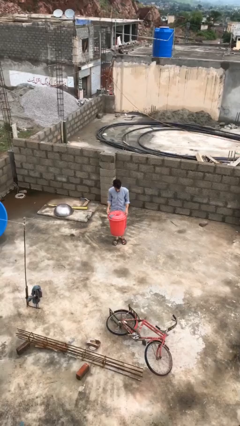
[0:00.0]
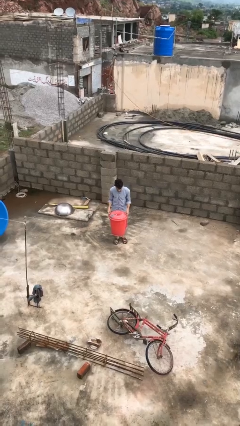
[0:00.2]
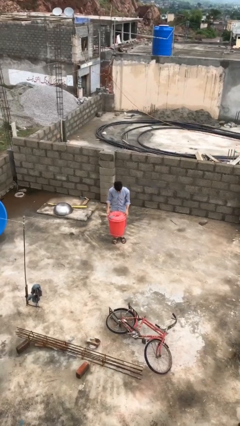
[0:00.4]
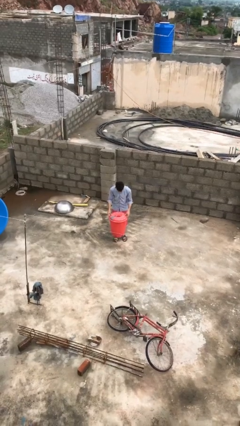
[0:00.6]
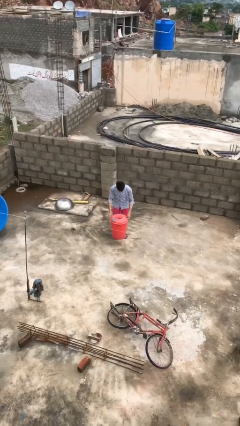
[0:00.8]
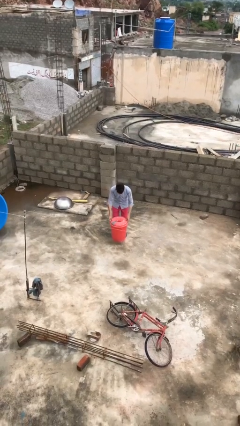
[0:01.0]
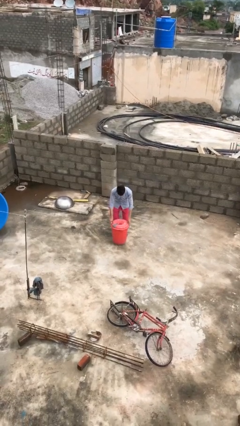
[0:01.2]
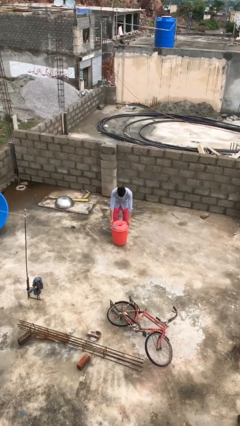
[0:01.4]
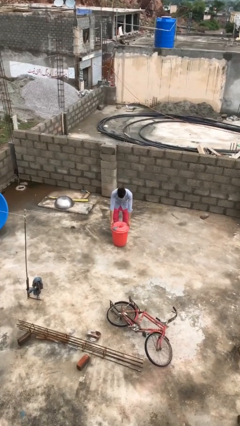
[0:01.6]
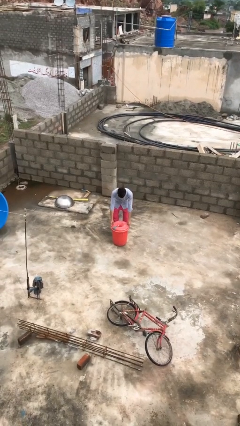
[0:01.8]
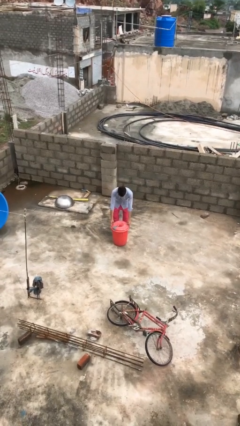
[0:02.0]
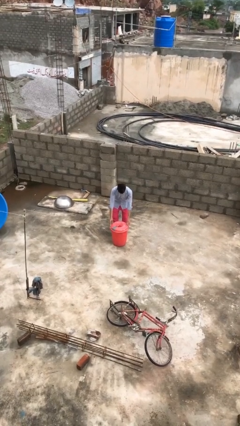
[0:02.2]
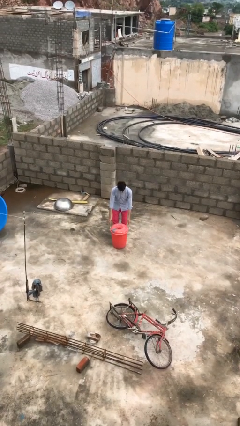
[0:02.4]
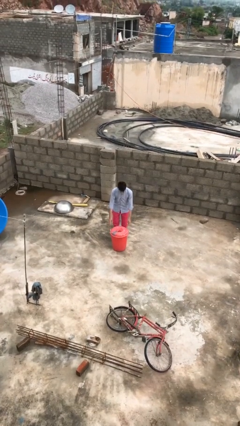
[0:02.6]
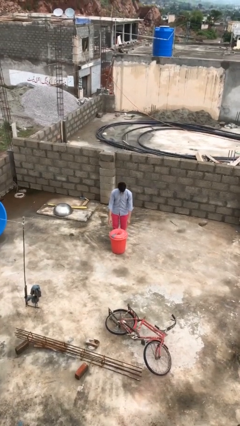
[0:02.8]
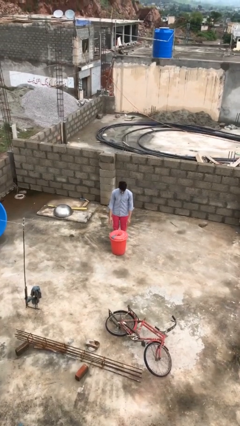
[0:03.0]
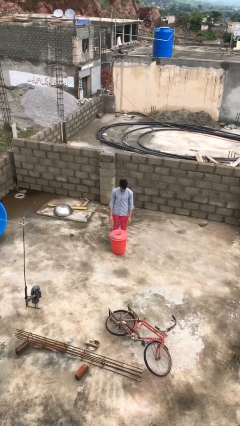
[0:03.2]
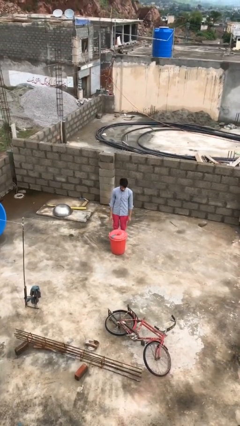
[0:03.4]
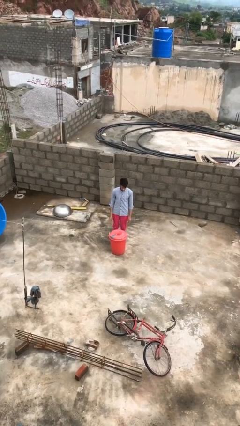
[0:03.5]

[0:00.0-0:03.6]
person puts down object on floor

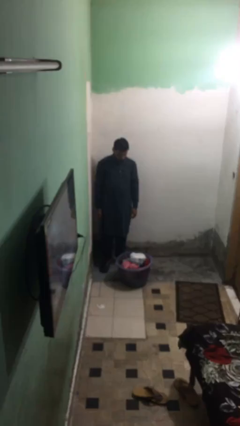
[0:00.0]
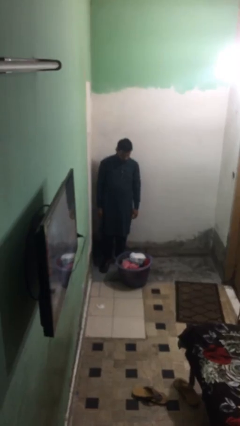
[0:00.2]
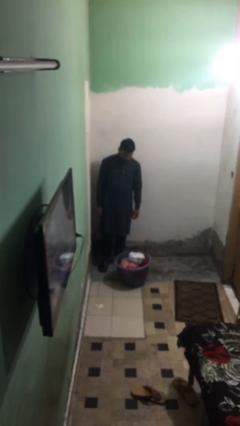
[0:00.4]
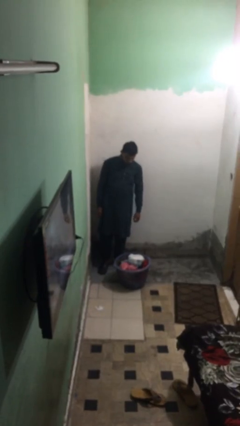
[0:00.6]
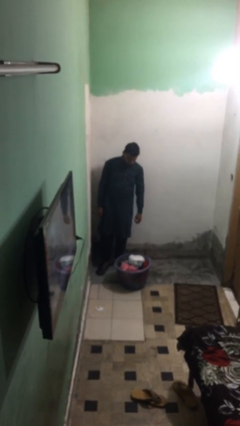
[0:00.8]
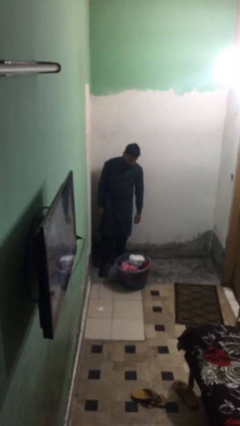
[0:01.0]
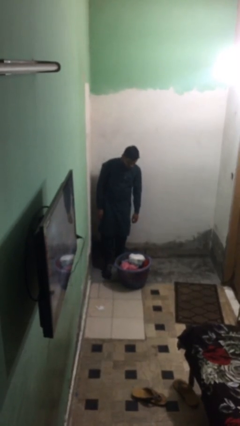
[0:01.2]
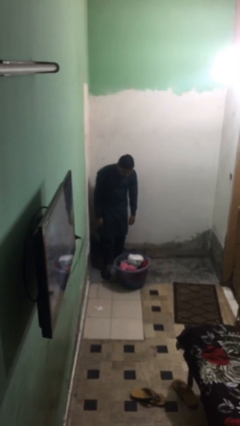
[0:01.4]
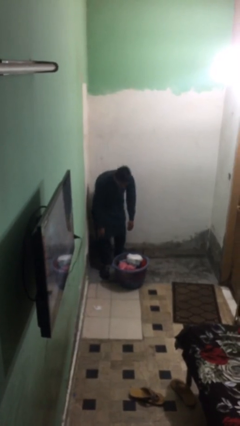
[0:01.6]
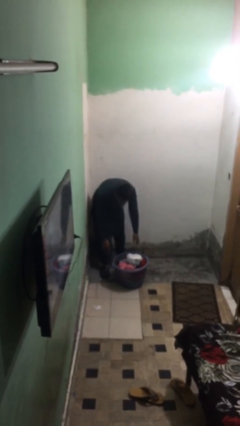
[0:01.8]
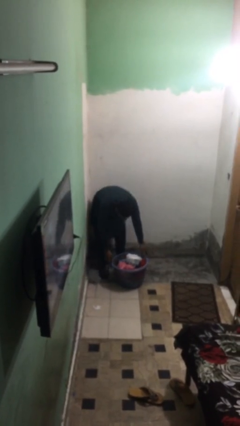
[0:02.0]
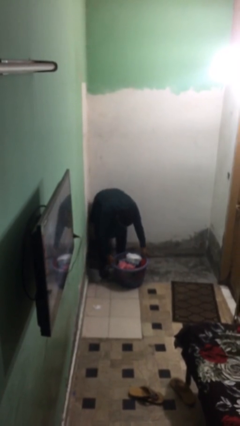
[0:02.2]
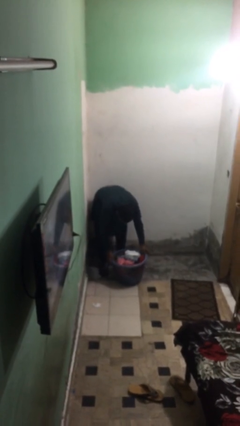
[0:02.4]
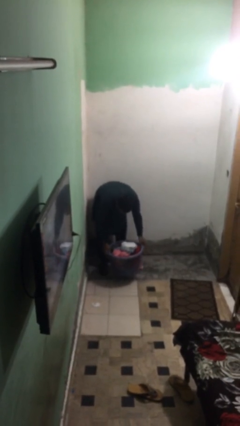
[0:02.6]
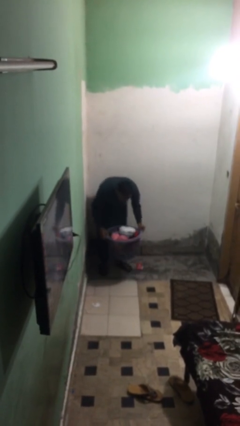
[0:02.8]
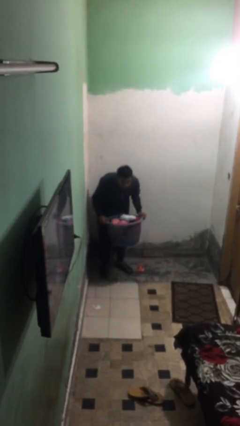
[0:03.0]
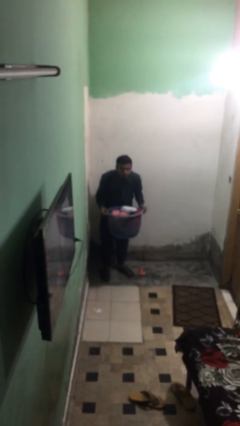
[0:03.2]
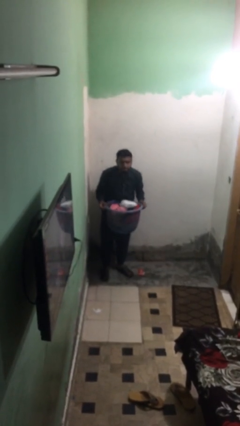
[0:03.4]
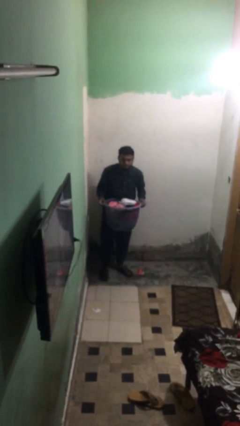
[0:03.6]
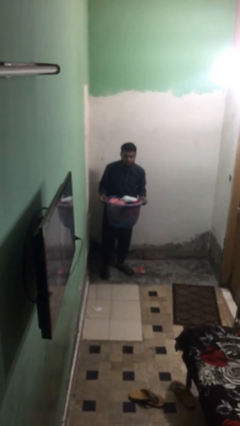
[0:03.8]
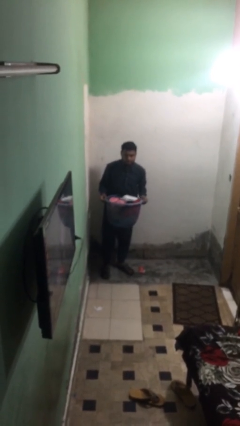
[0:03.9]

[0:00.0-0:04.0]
person picks up object from floor

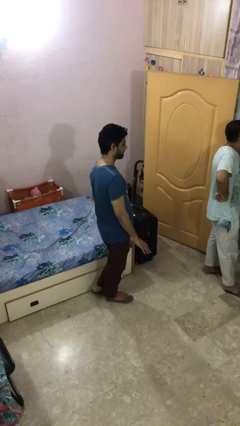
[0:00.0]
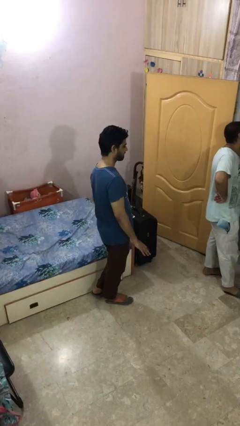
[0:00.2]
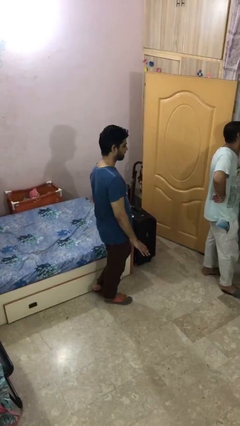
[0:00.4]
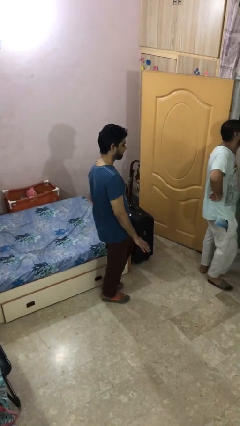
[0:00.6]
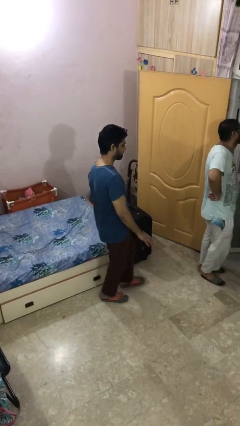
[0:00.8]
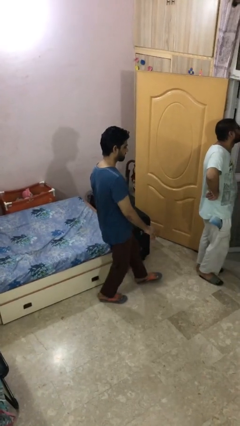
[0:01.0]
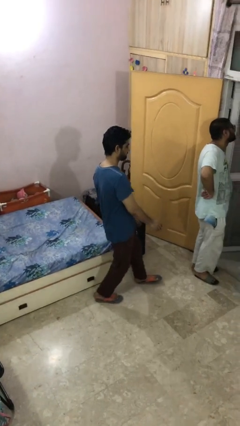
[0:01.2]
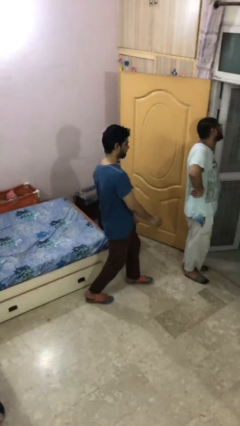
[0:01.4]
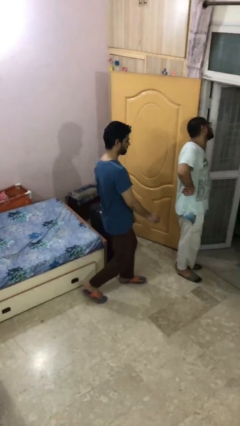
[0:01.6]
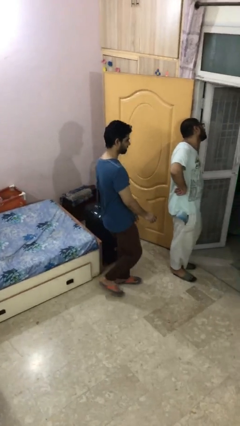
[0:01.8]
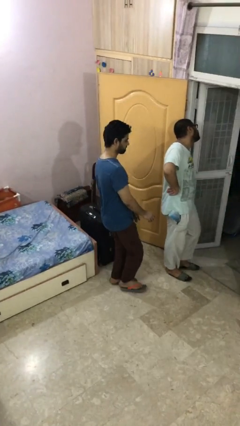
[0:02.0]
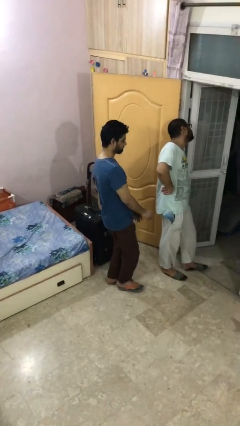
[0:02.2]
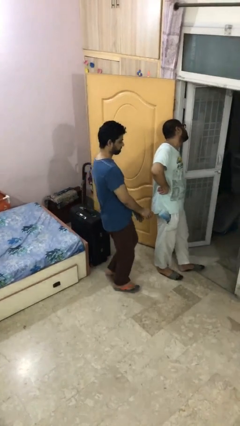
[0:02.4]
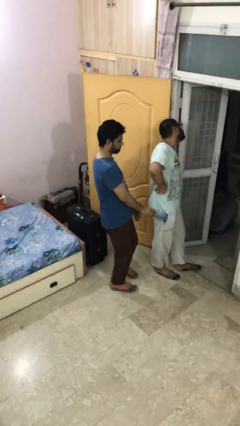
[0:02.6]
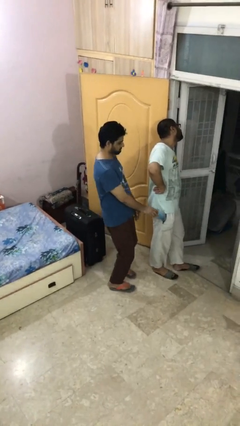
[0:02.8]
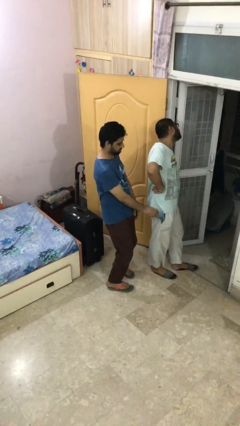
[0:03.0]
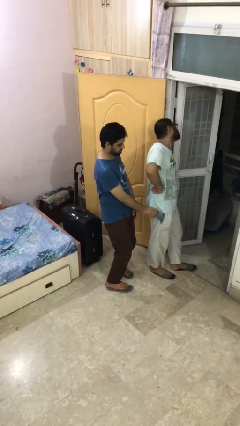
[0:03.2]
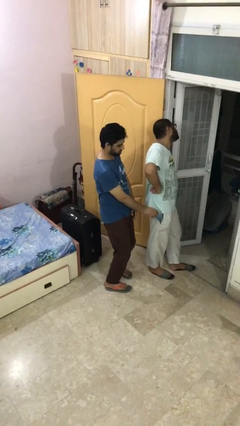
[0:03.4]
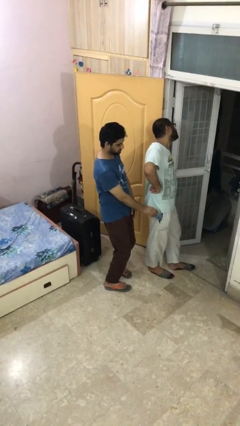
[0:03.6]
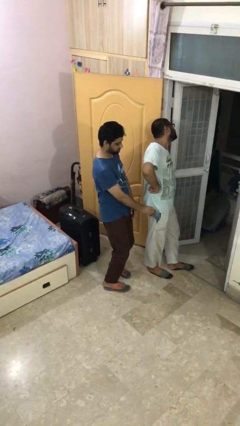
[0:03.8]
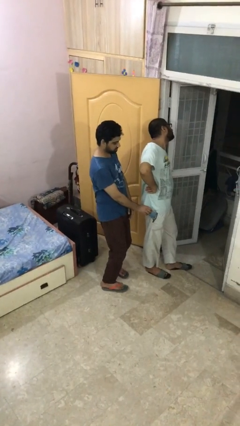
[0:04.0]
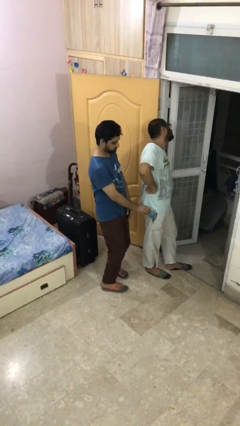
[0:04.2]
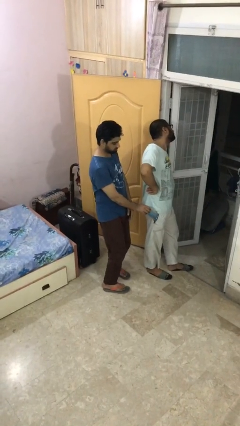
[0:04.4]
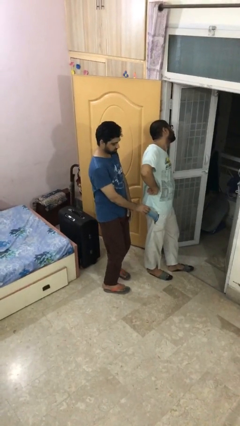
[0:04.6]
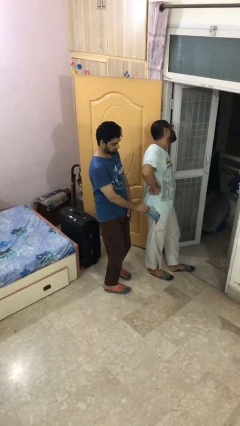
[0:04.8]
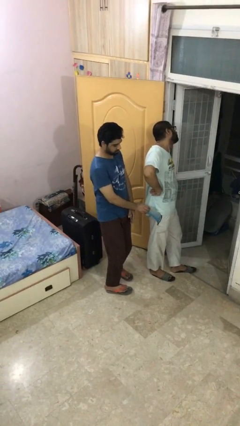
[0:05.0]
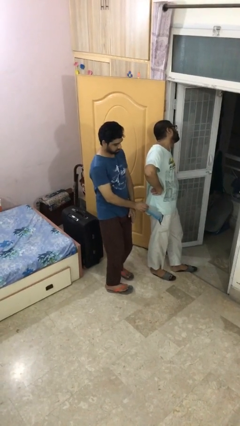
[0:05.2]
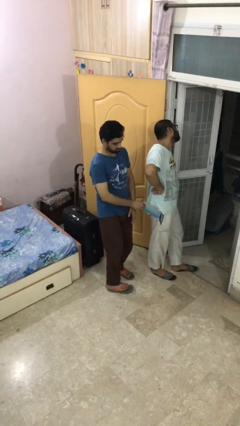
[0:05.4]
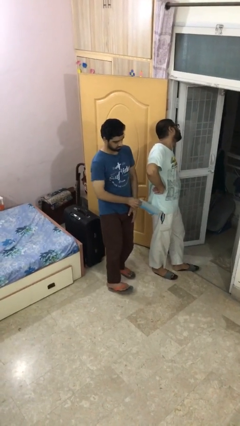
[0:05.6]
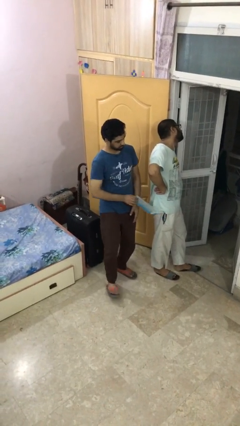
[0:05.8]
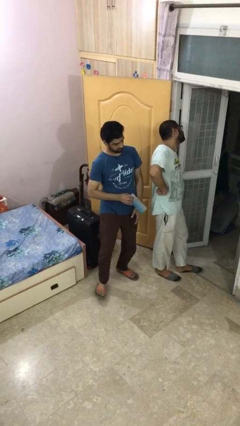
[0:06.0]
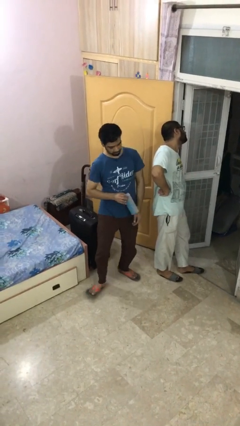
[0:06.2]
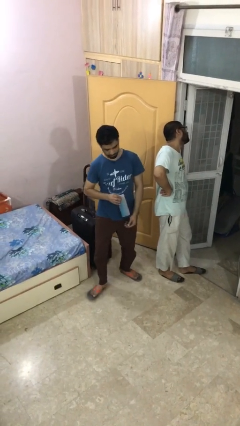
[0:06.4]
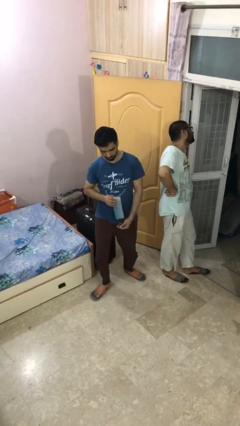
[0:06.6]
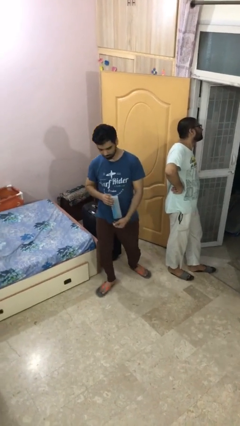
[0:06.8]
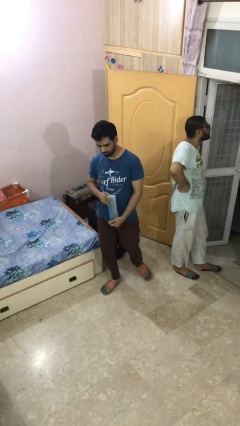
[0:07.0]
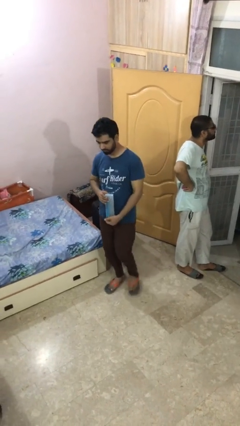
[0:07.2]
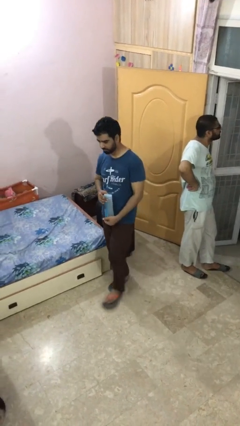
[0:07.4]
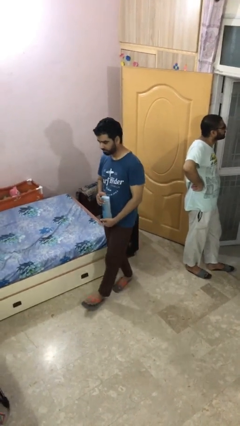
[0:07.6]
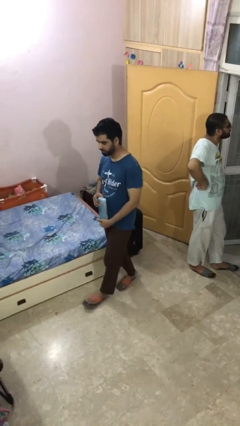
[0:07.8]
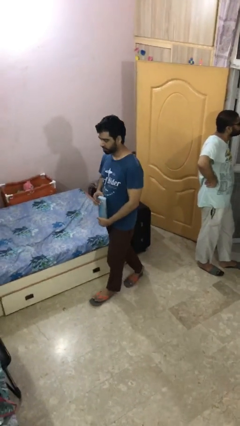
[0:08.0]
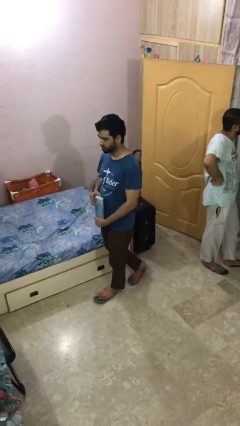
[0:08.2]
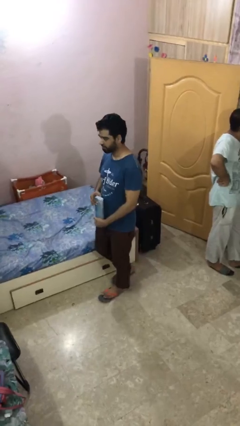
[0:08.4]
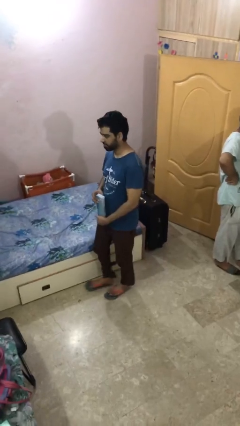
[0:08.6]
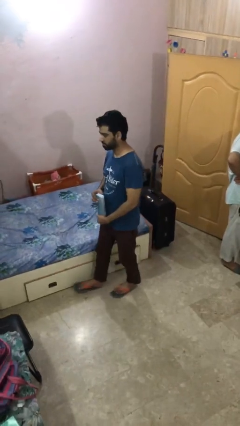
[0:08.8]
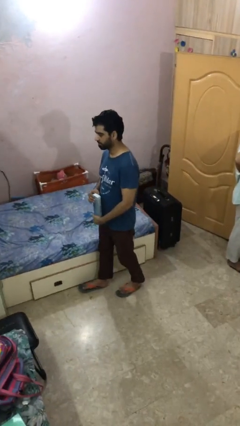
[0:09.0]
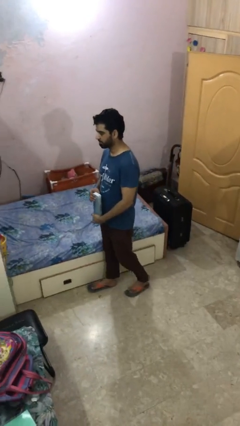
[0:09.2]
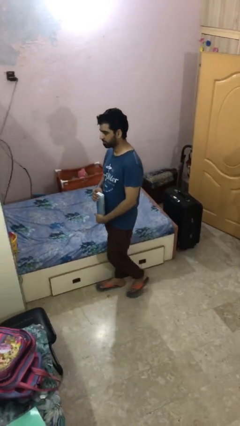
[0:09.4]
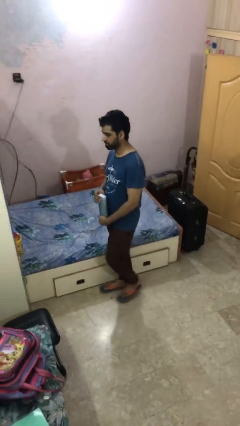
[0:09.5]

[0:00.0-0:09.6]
person steals object from person

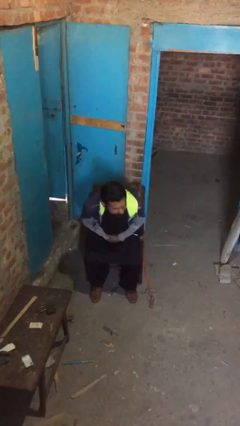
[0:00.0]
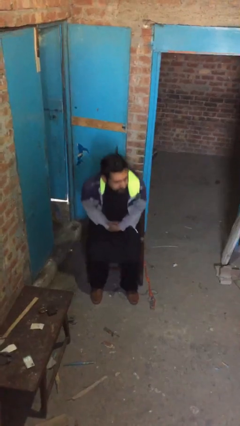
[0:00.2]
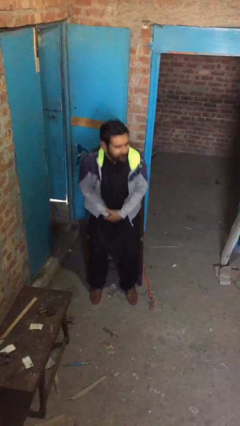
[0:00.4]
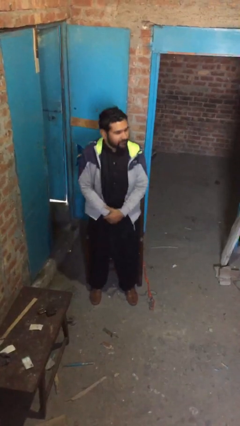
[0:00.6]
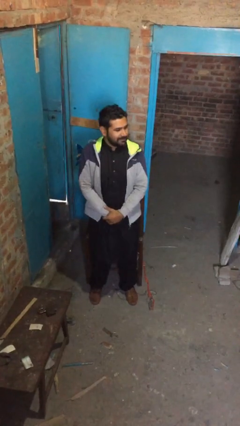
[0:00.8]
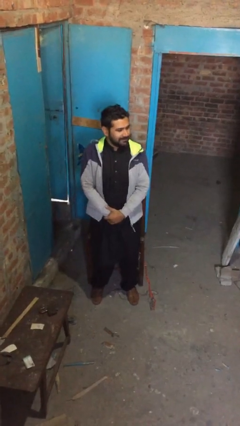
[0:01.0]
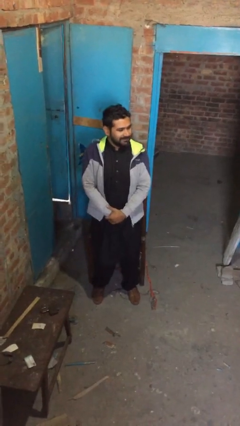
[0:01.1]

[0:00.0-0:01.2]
person stands up
